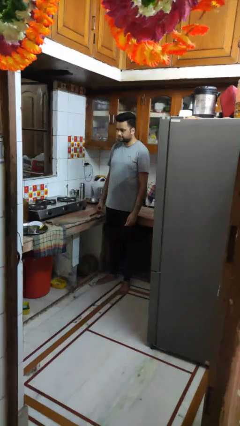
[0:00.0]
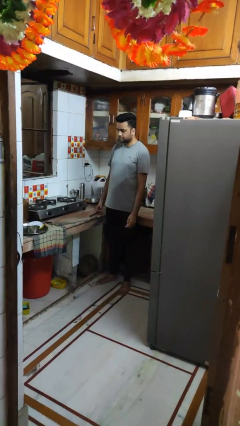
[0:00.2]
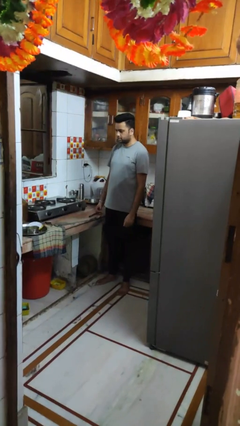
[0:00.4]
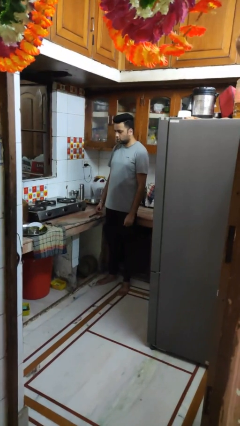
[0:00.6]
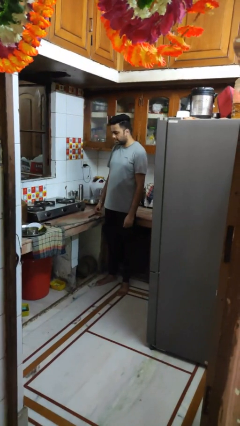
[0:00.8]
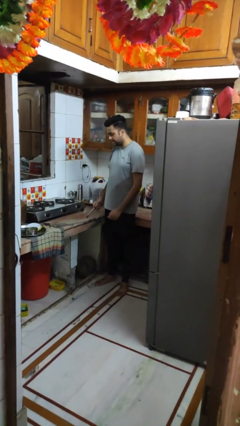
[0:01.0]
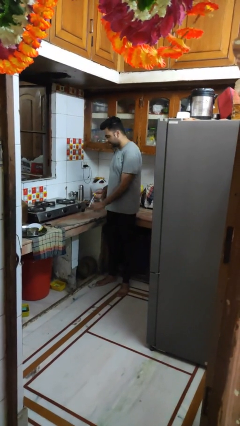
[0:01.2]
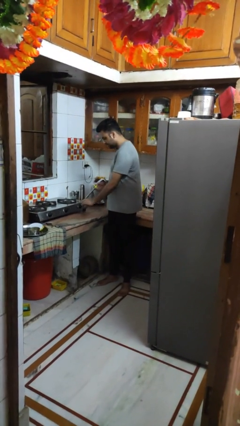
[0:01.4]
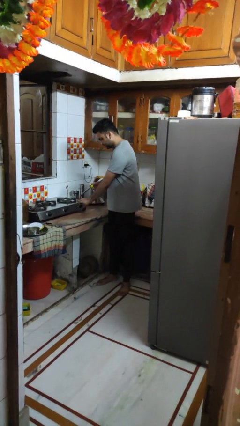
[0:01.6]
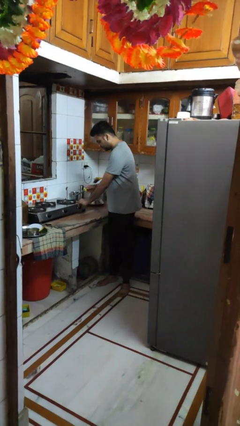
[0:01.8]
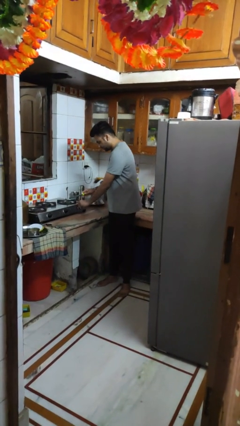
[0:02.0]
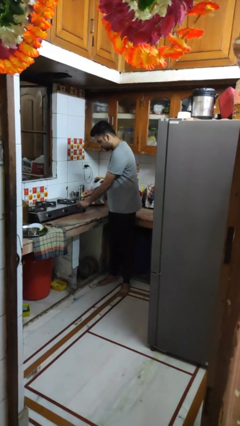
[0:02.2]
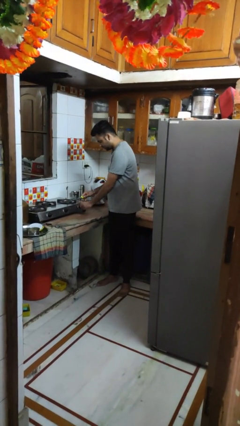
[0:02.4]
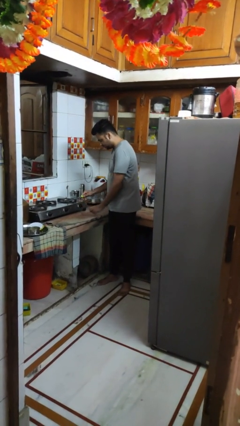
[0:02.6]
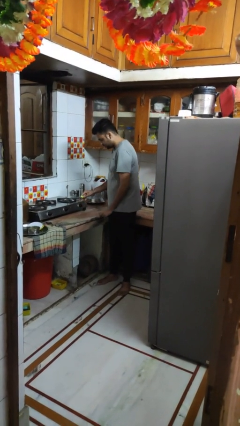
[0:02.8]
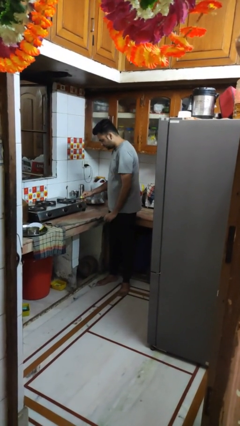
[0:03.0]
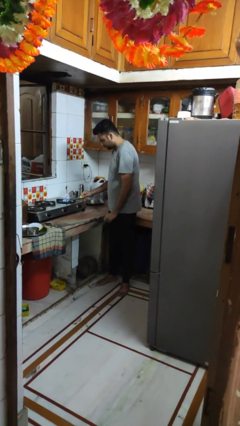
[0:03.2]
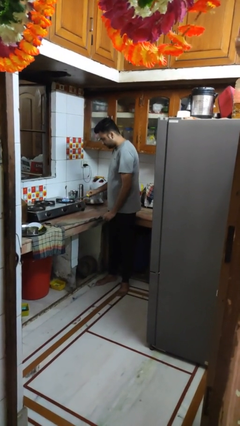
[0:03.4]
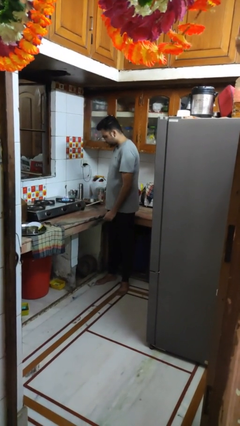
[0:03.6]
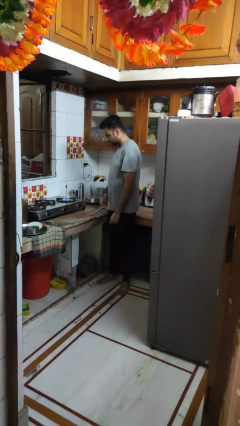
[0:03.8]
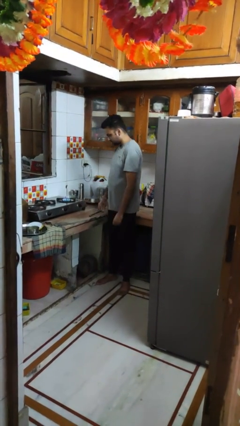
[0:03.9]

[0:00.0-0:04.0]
person turns on stovetop

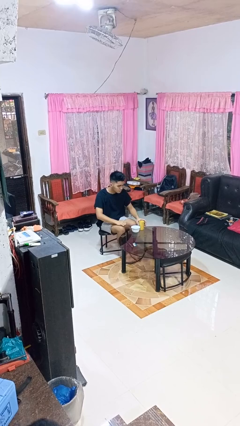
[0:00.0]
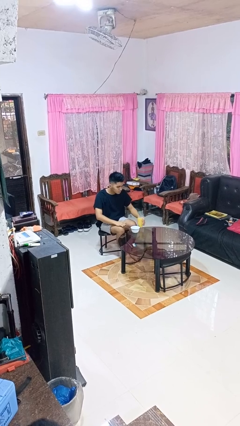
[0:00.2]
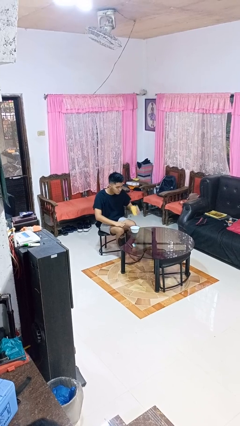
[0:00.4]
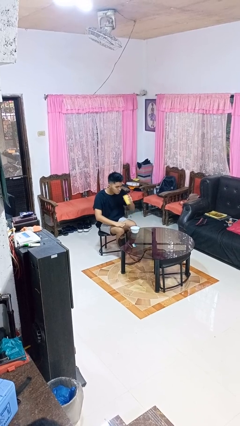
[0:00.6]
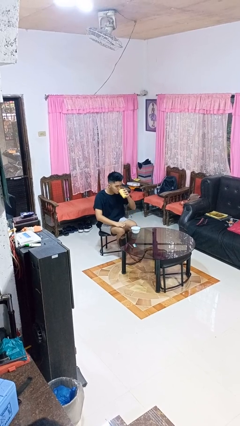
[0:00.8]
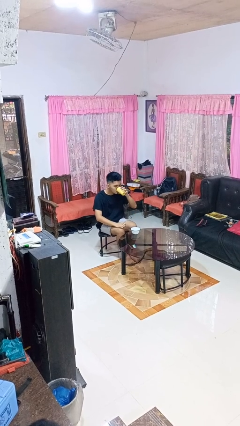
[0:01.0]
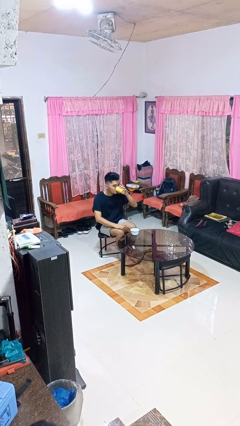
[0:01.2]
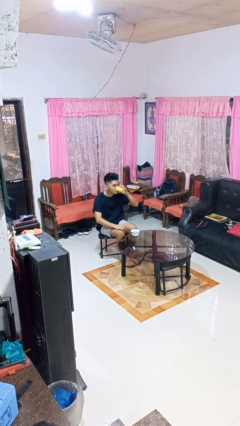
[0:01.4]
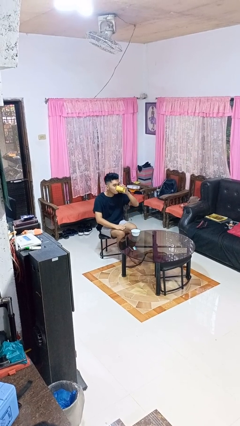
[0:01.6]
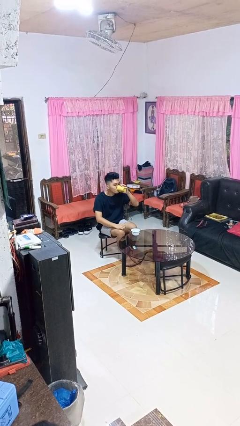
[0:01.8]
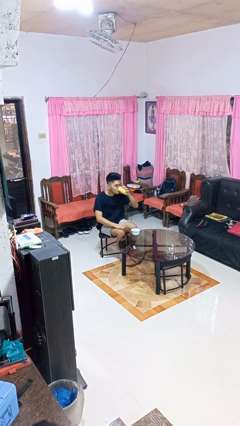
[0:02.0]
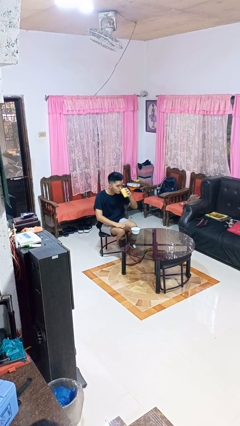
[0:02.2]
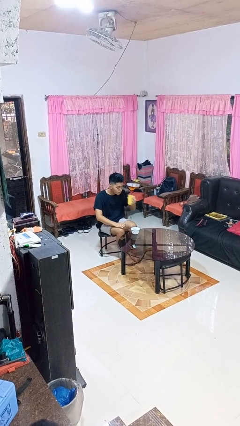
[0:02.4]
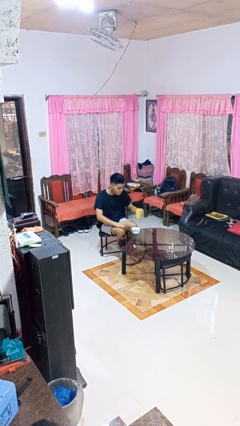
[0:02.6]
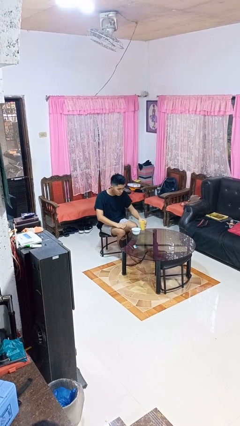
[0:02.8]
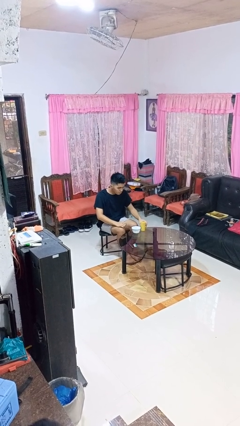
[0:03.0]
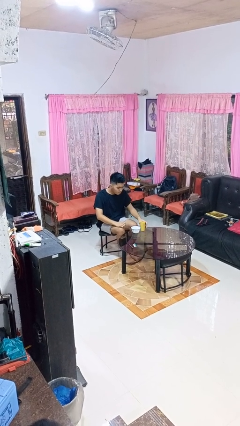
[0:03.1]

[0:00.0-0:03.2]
person drinks from cup

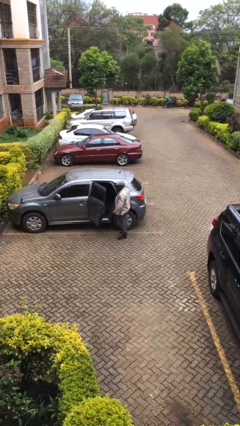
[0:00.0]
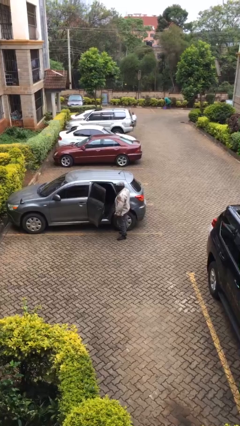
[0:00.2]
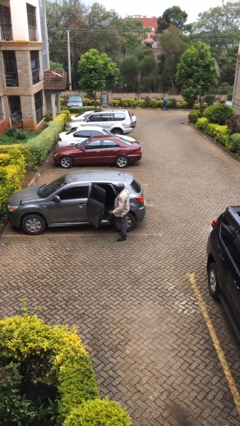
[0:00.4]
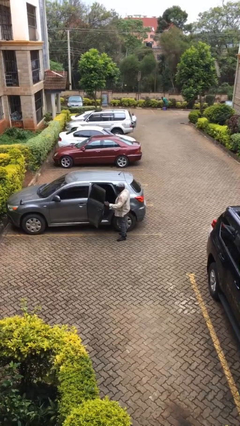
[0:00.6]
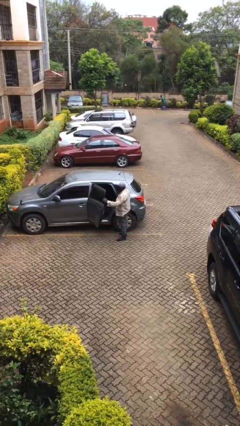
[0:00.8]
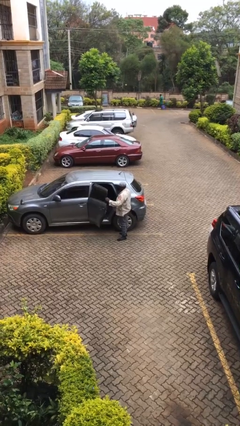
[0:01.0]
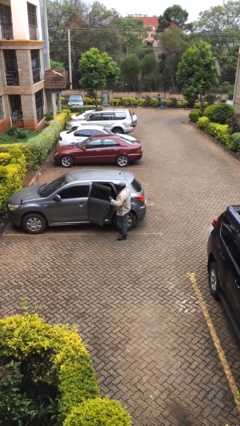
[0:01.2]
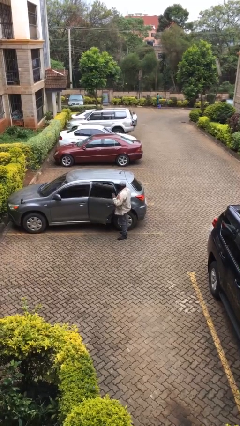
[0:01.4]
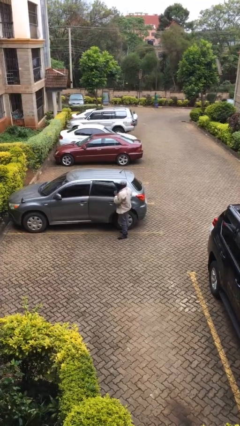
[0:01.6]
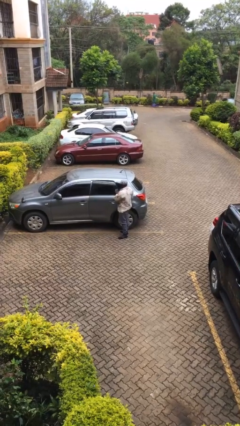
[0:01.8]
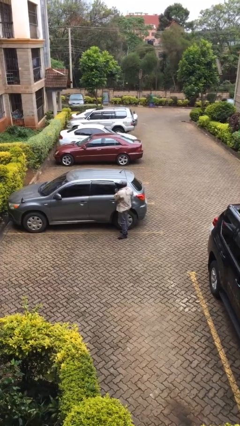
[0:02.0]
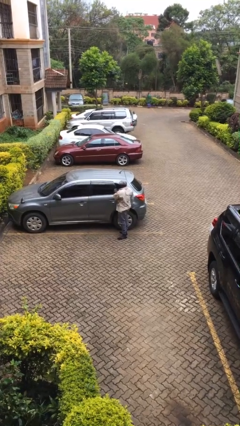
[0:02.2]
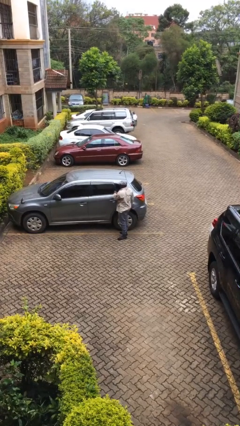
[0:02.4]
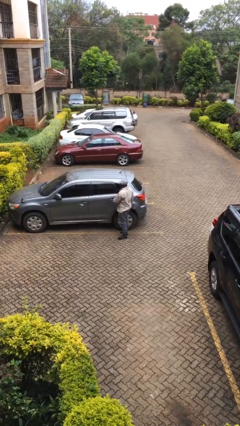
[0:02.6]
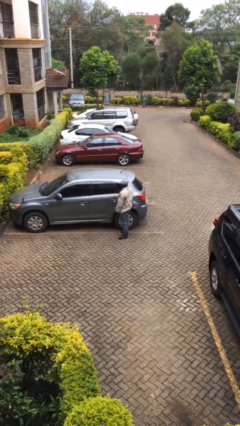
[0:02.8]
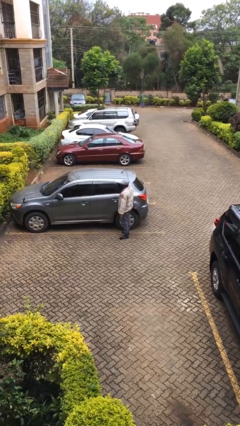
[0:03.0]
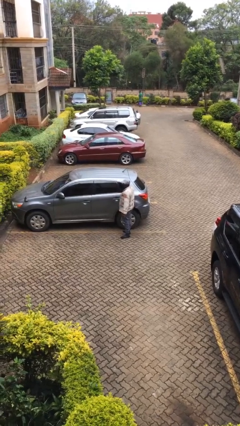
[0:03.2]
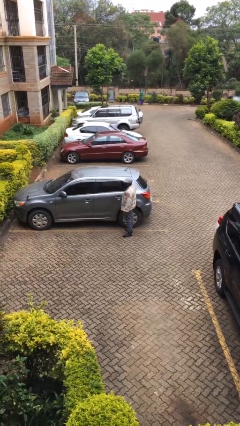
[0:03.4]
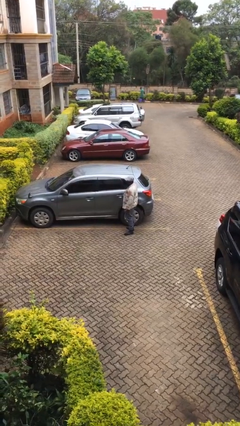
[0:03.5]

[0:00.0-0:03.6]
person closes car door

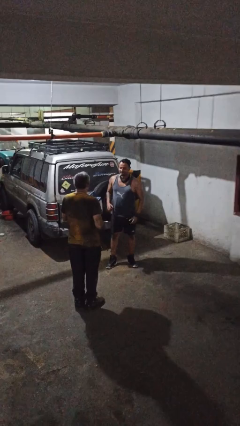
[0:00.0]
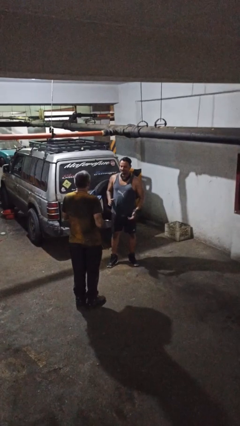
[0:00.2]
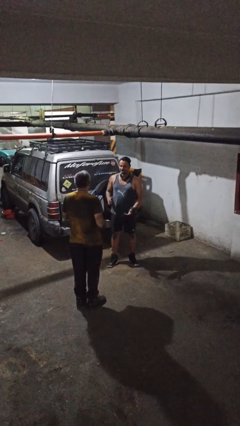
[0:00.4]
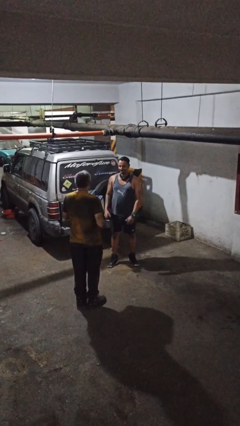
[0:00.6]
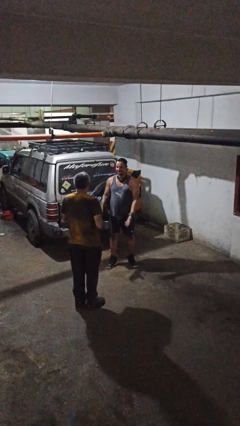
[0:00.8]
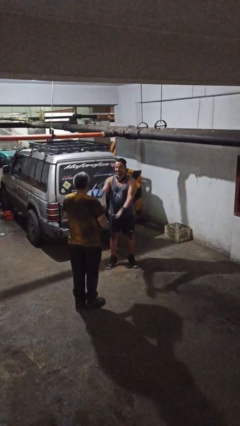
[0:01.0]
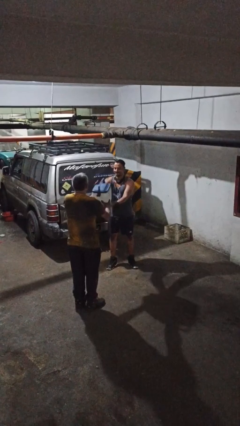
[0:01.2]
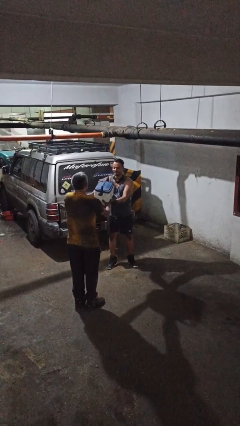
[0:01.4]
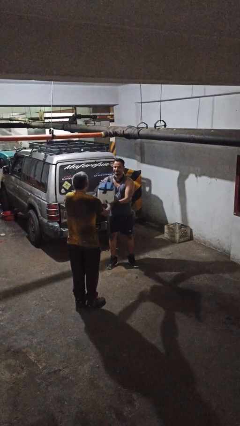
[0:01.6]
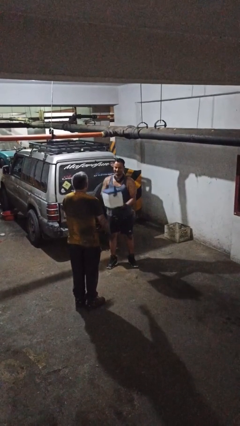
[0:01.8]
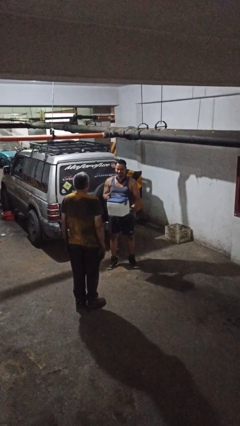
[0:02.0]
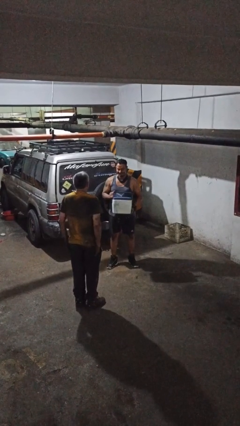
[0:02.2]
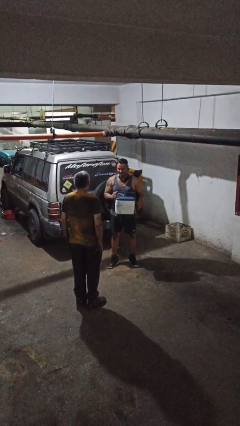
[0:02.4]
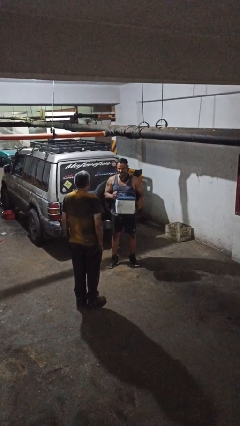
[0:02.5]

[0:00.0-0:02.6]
person transfers object to person

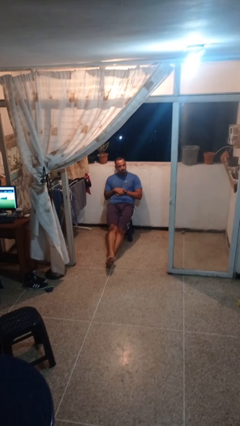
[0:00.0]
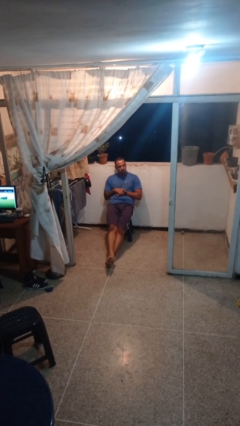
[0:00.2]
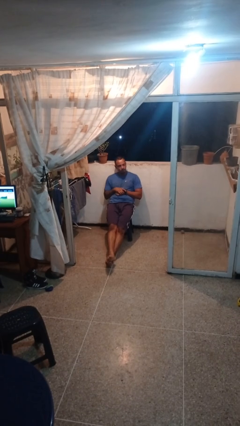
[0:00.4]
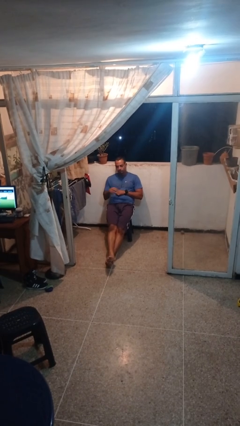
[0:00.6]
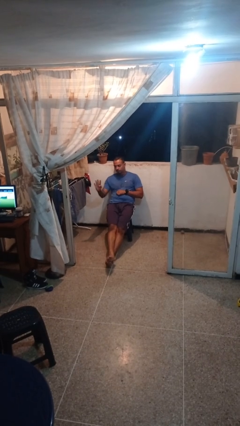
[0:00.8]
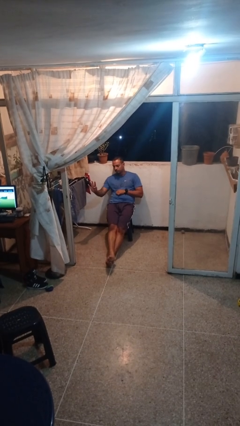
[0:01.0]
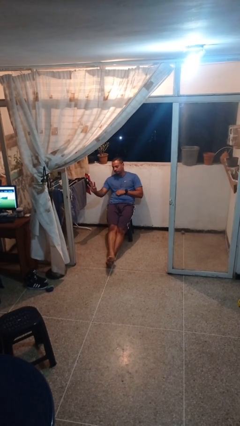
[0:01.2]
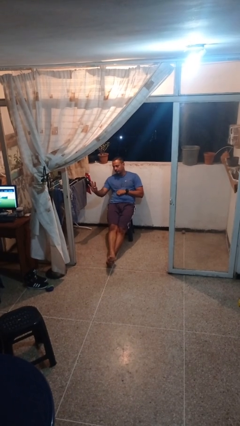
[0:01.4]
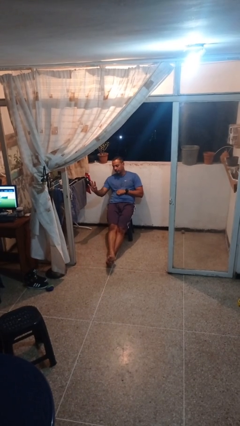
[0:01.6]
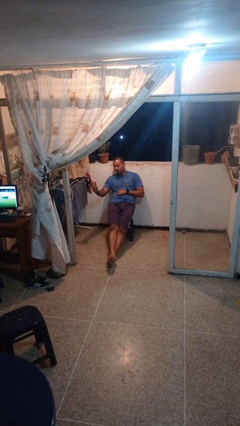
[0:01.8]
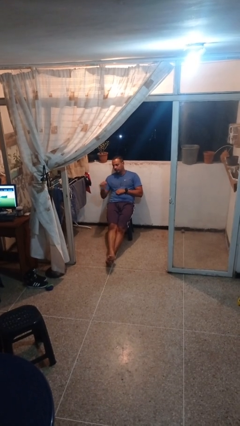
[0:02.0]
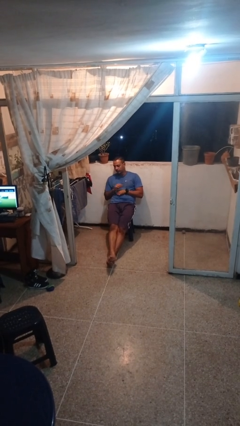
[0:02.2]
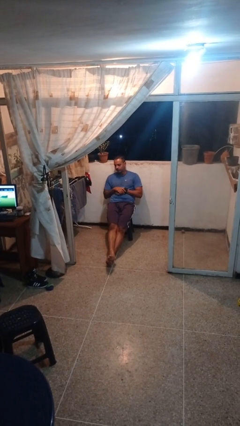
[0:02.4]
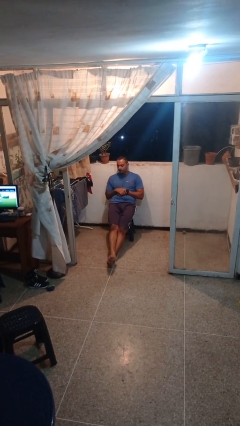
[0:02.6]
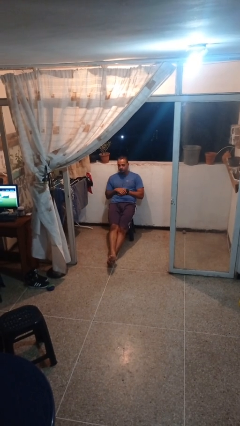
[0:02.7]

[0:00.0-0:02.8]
person gestures number four

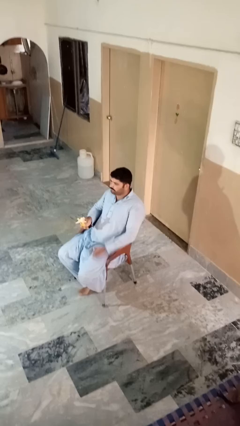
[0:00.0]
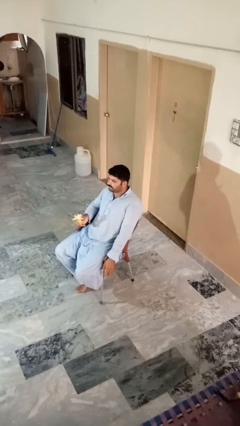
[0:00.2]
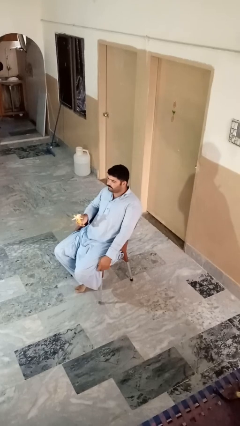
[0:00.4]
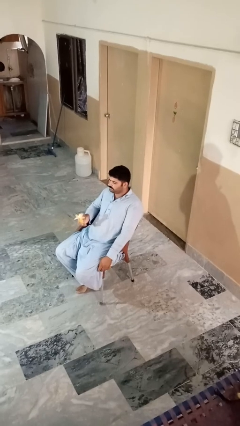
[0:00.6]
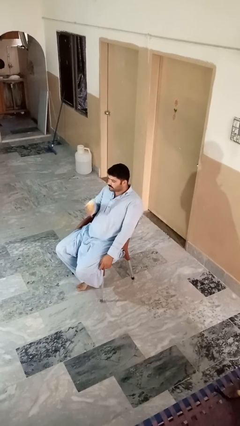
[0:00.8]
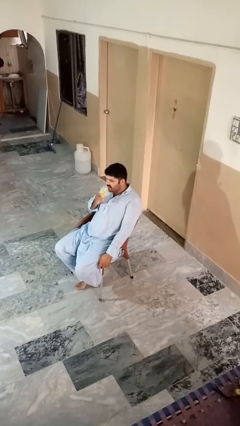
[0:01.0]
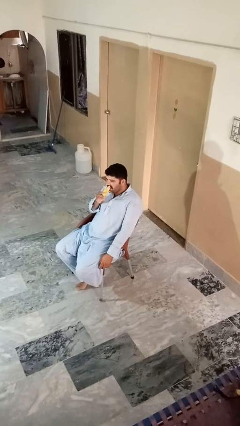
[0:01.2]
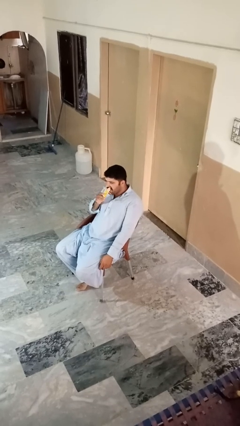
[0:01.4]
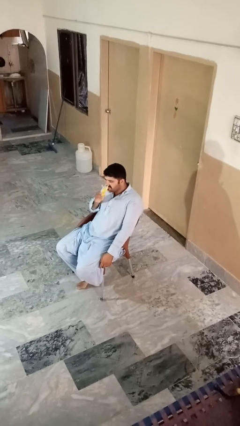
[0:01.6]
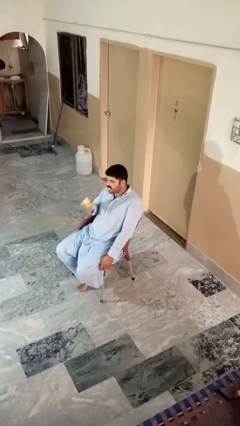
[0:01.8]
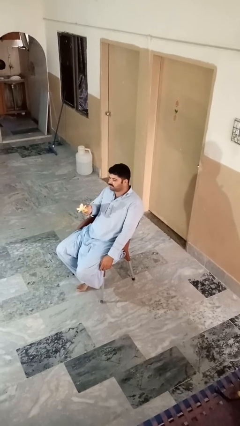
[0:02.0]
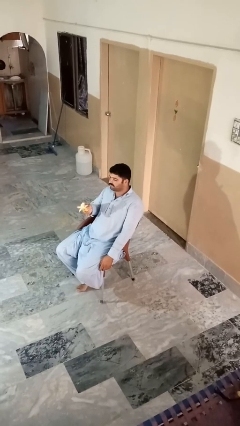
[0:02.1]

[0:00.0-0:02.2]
person eats banana
